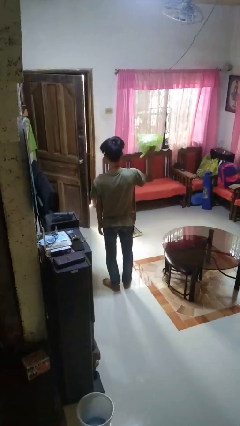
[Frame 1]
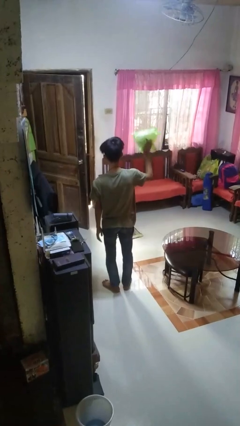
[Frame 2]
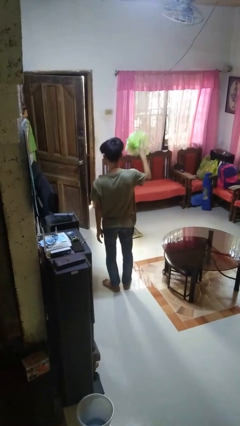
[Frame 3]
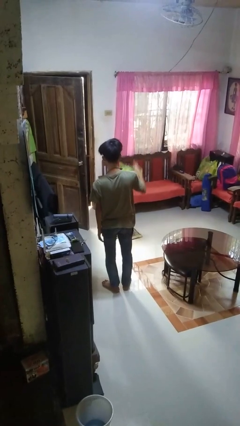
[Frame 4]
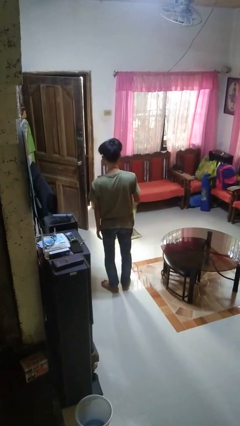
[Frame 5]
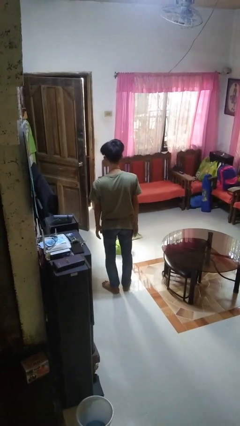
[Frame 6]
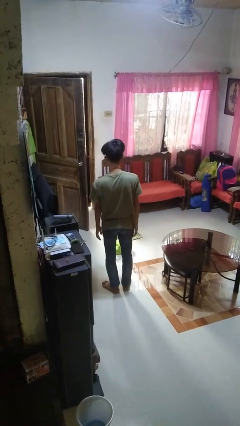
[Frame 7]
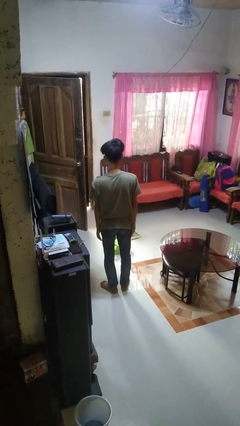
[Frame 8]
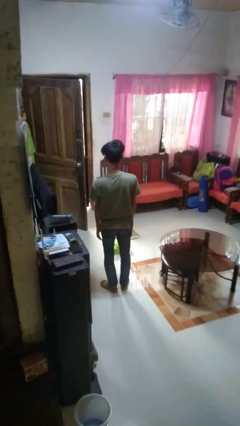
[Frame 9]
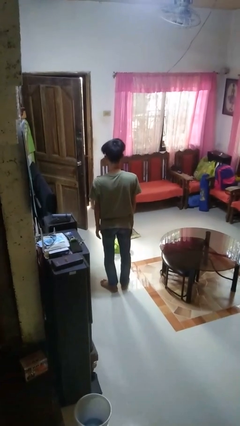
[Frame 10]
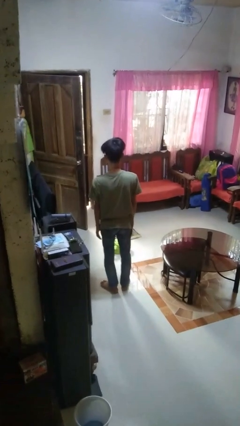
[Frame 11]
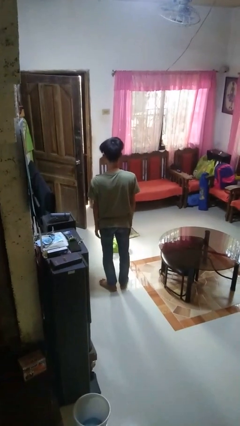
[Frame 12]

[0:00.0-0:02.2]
person throws object to ground

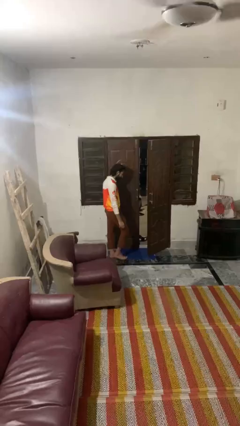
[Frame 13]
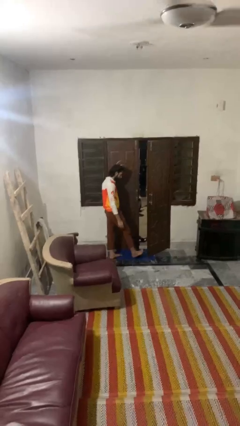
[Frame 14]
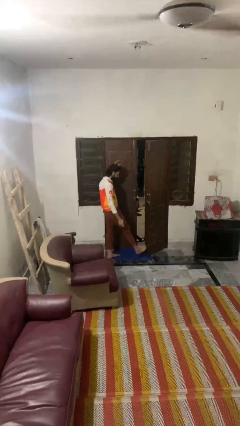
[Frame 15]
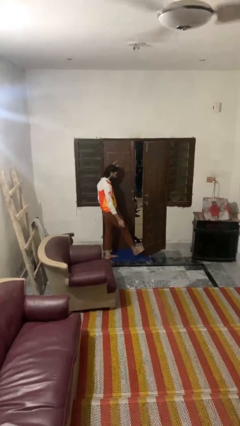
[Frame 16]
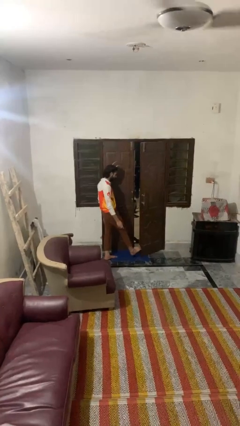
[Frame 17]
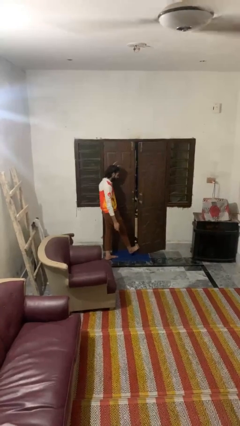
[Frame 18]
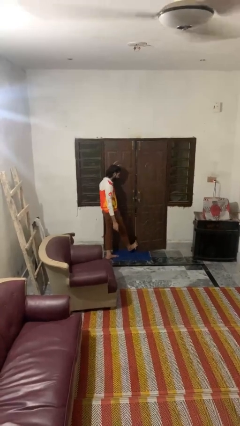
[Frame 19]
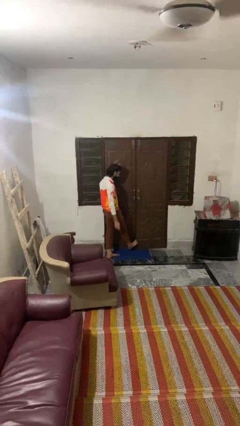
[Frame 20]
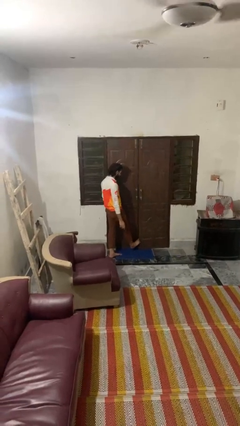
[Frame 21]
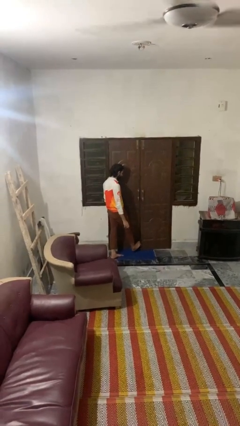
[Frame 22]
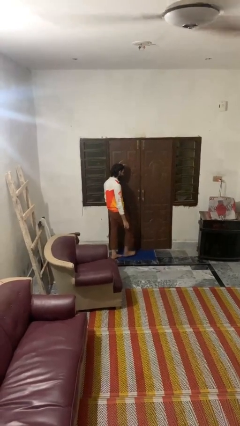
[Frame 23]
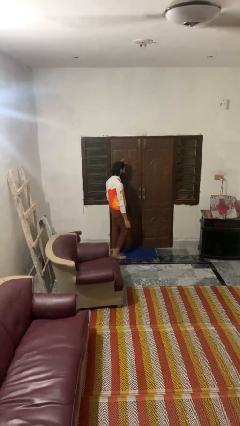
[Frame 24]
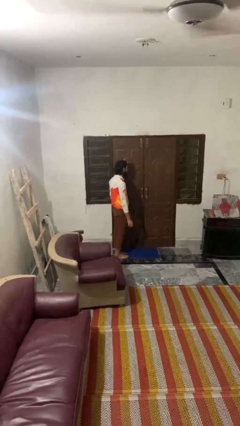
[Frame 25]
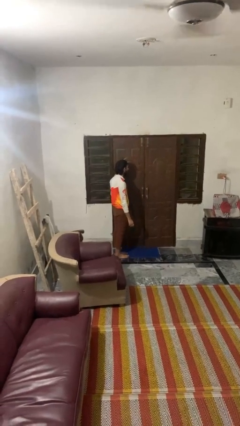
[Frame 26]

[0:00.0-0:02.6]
person closes door with foot

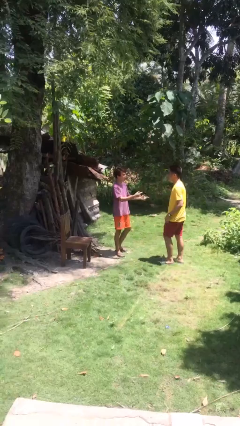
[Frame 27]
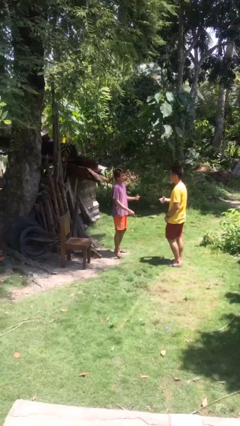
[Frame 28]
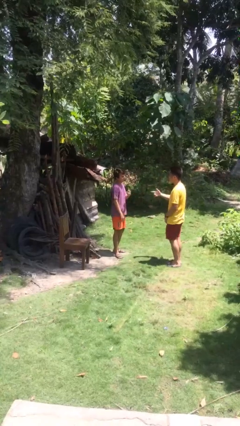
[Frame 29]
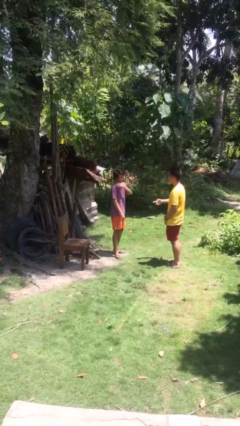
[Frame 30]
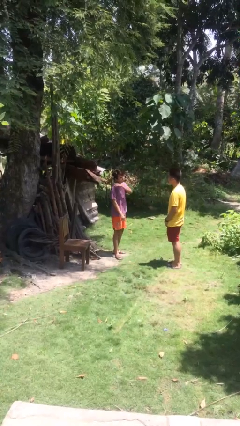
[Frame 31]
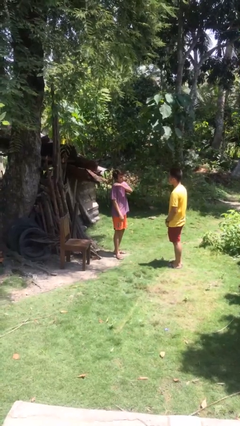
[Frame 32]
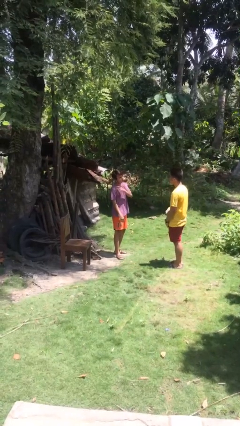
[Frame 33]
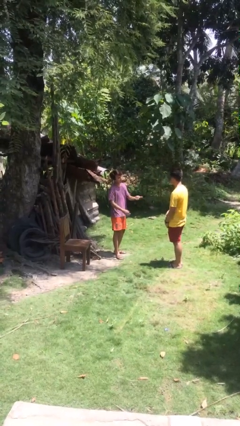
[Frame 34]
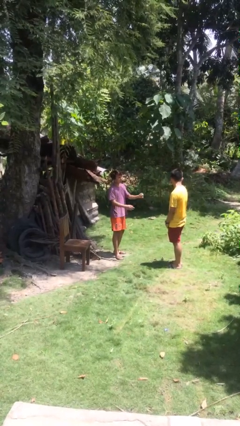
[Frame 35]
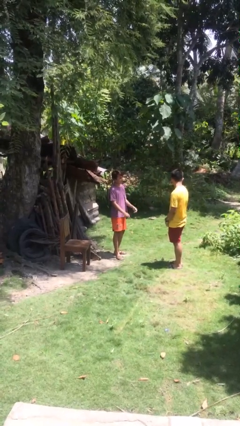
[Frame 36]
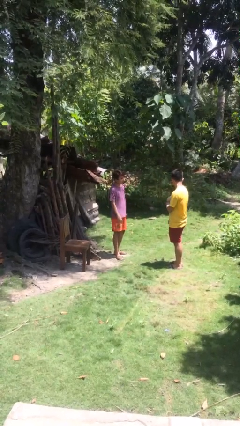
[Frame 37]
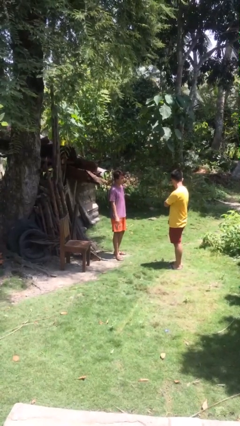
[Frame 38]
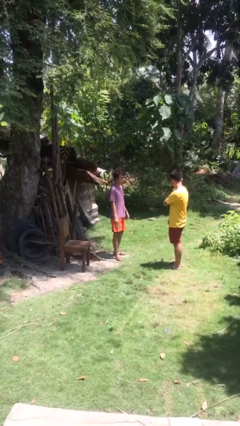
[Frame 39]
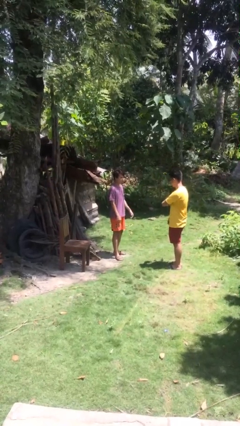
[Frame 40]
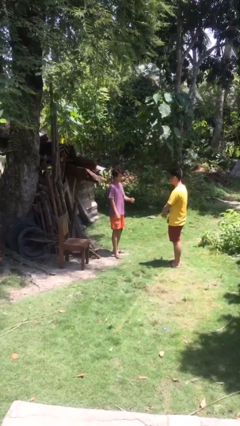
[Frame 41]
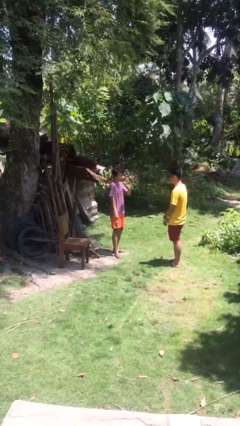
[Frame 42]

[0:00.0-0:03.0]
person talks to person

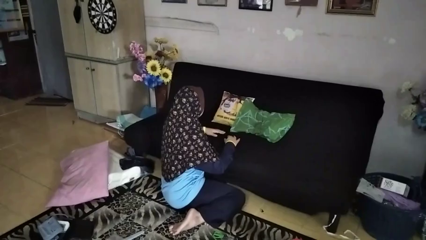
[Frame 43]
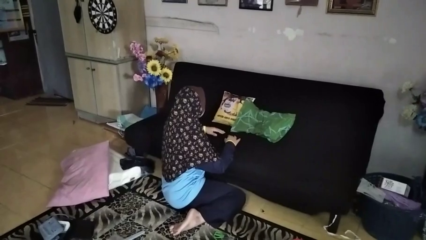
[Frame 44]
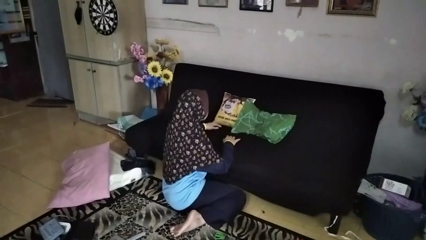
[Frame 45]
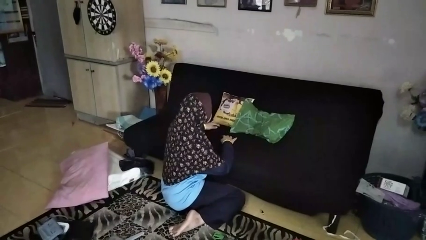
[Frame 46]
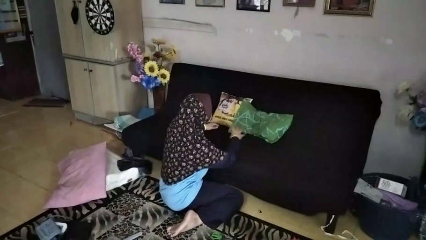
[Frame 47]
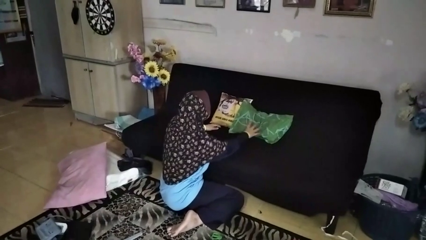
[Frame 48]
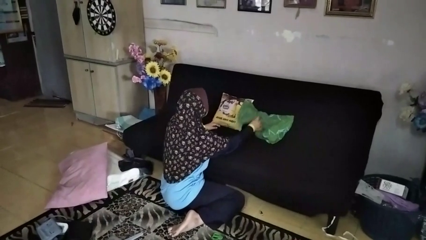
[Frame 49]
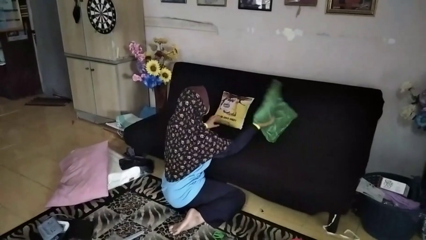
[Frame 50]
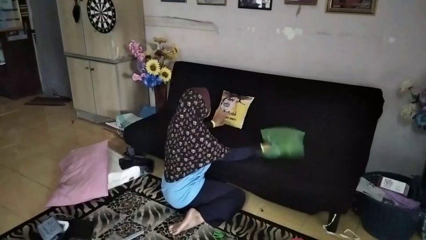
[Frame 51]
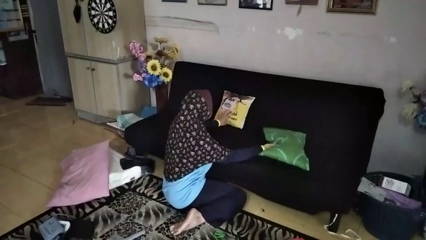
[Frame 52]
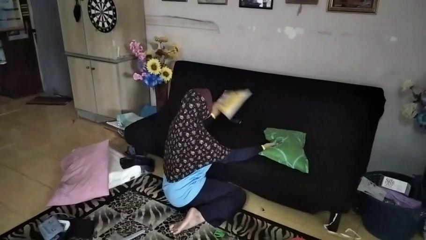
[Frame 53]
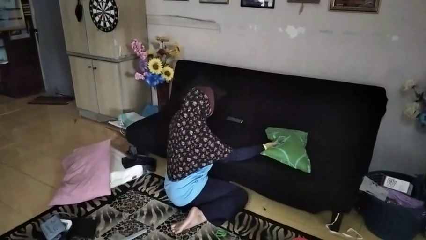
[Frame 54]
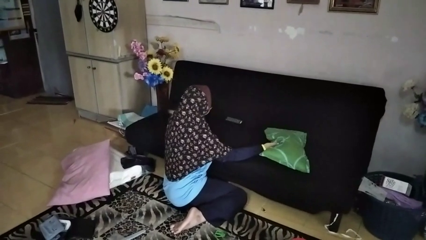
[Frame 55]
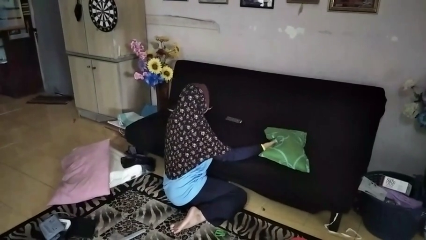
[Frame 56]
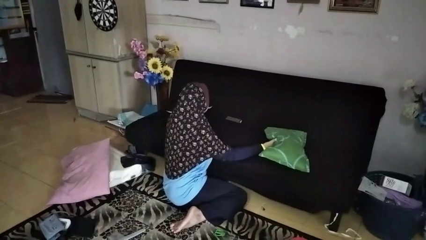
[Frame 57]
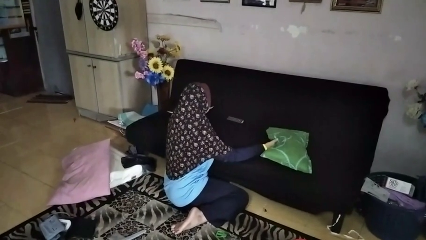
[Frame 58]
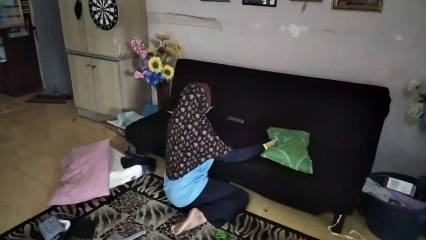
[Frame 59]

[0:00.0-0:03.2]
person searches in couch

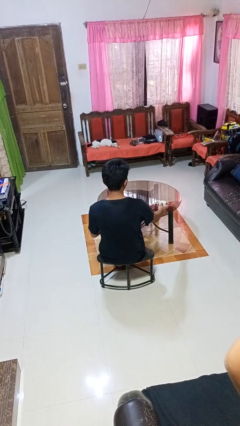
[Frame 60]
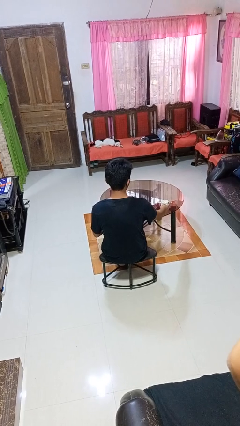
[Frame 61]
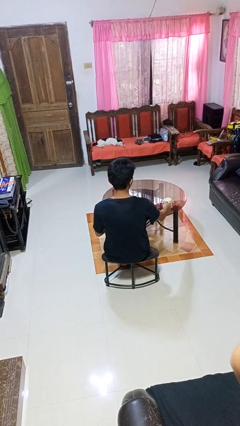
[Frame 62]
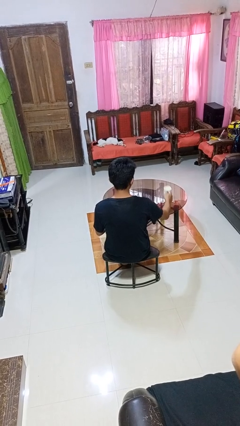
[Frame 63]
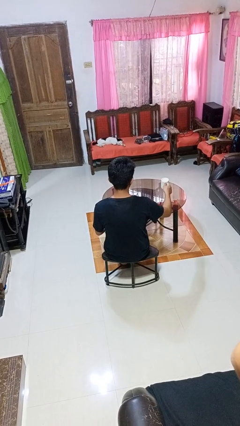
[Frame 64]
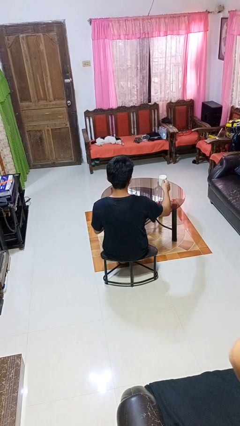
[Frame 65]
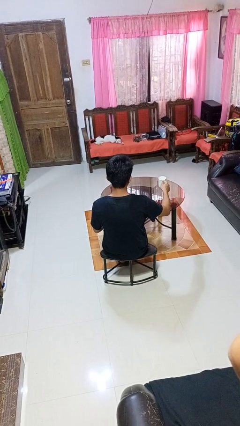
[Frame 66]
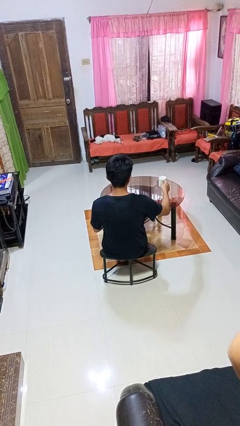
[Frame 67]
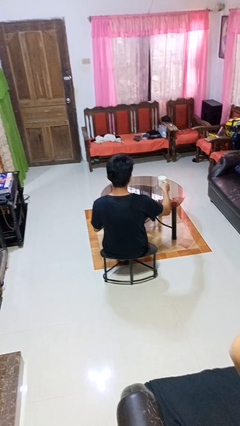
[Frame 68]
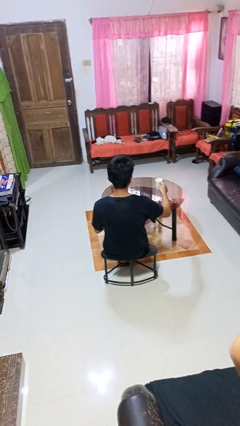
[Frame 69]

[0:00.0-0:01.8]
person picks up object from table

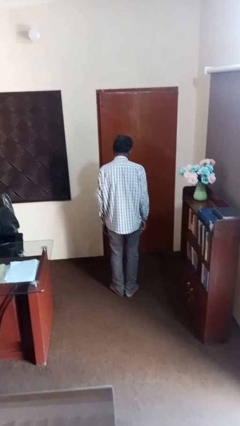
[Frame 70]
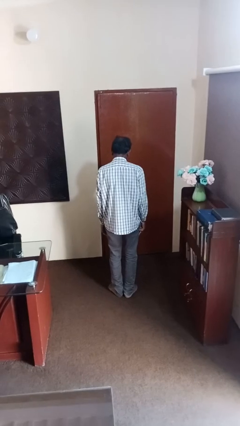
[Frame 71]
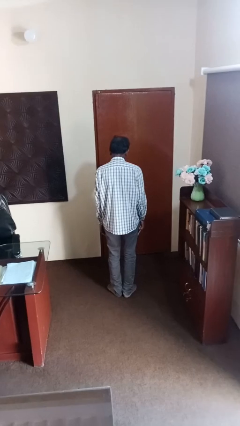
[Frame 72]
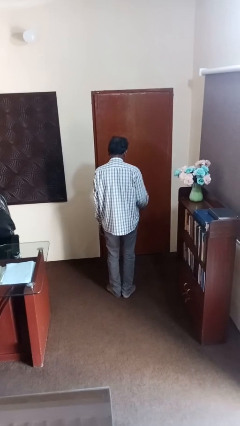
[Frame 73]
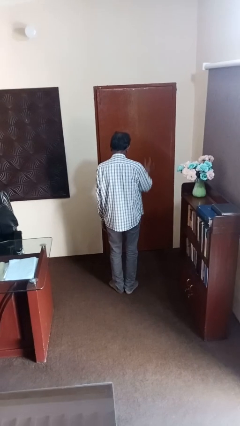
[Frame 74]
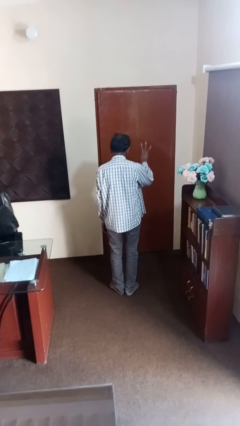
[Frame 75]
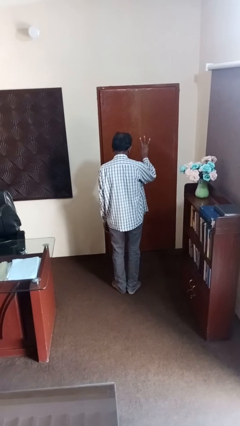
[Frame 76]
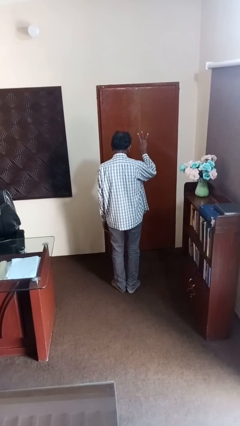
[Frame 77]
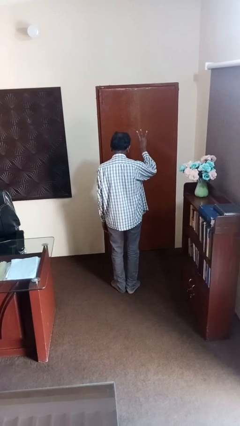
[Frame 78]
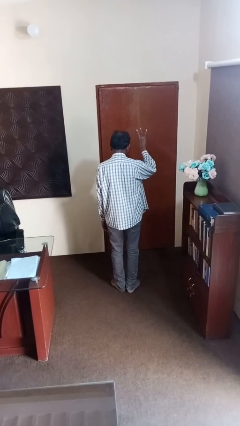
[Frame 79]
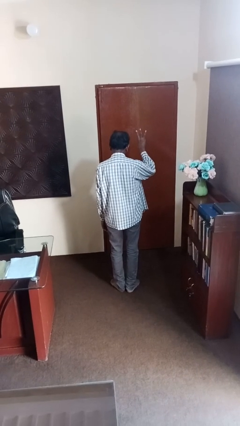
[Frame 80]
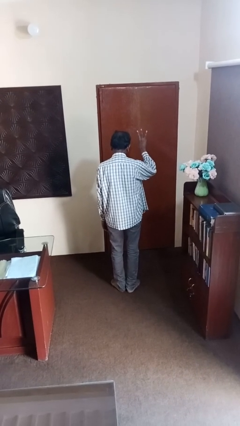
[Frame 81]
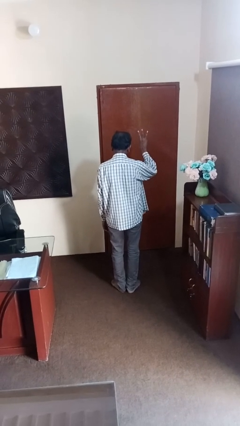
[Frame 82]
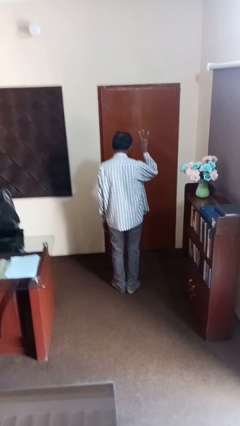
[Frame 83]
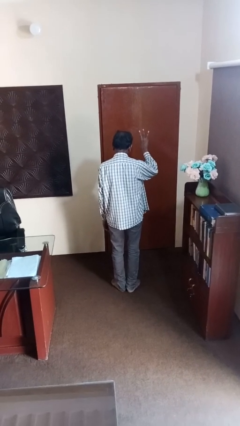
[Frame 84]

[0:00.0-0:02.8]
person gestures number three

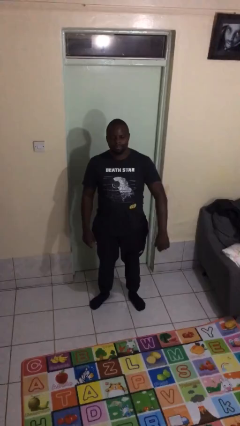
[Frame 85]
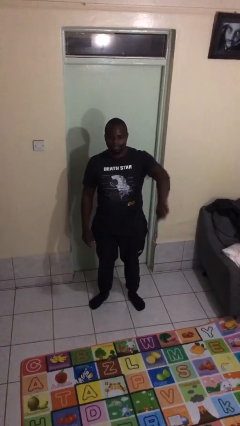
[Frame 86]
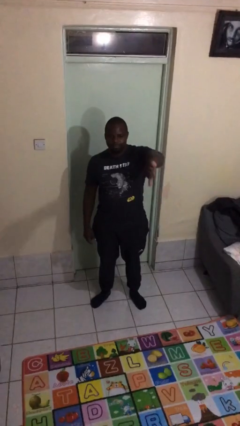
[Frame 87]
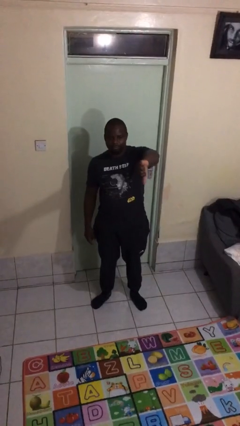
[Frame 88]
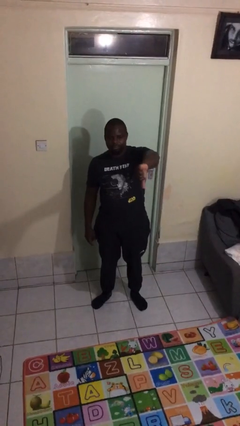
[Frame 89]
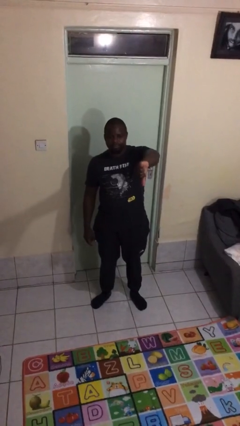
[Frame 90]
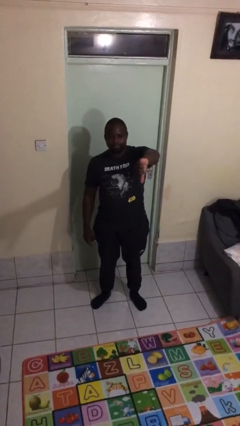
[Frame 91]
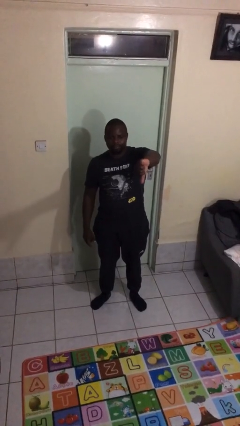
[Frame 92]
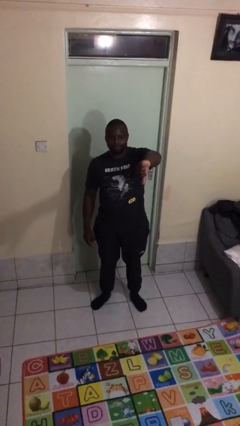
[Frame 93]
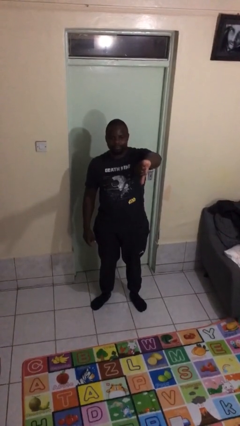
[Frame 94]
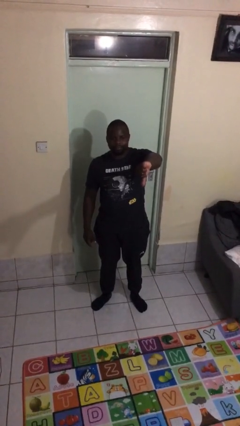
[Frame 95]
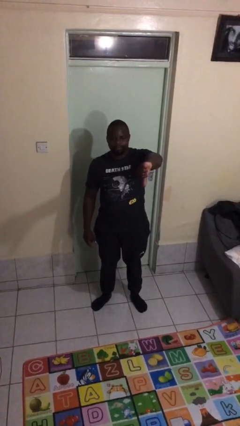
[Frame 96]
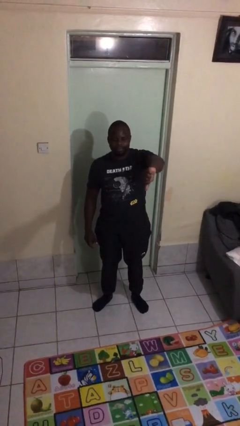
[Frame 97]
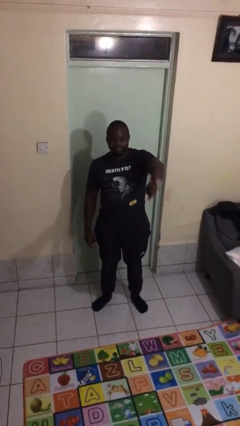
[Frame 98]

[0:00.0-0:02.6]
person gestures thumbs down
